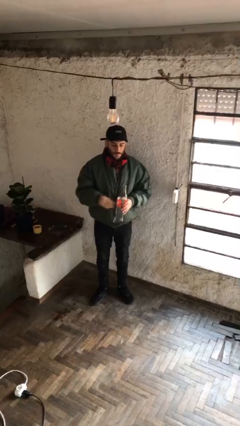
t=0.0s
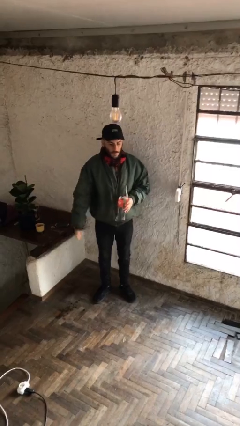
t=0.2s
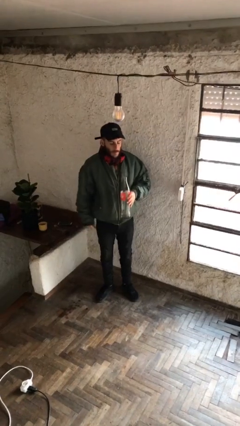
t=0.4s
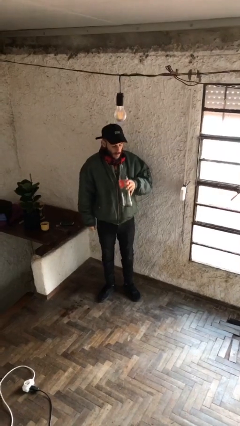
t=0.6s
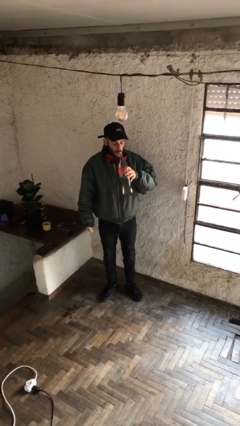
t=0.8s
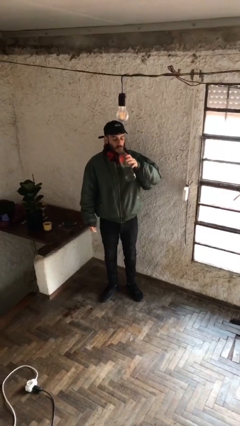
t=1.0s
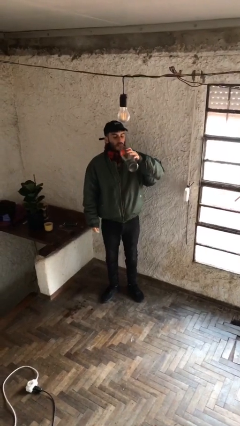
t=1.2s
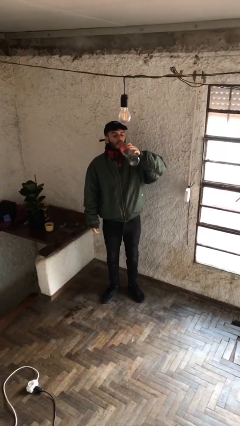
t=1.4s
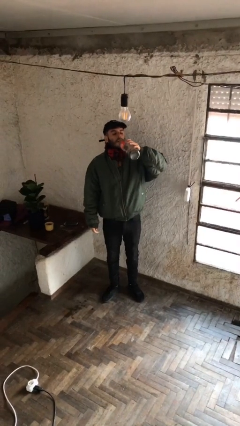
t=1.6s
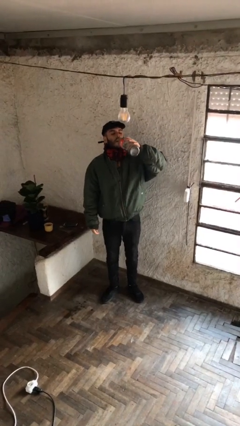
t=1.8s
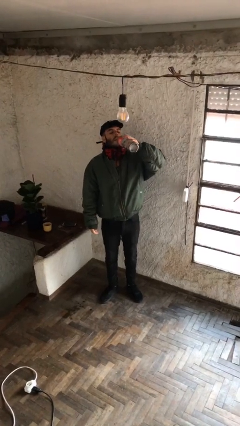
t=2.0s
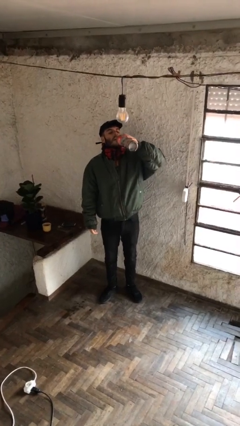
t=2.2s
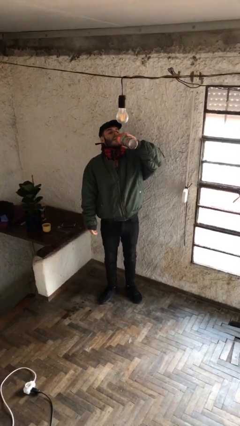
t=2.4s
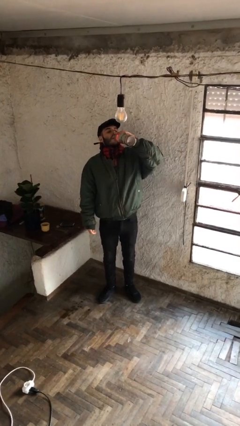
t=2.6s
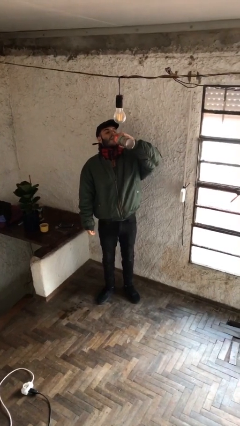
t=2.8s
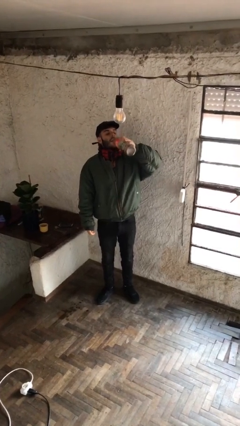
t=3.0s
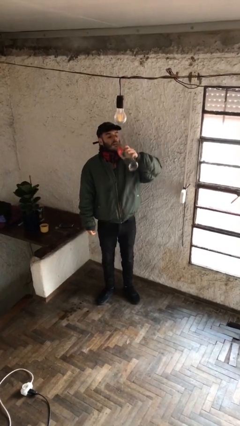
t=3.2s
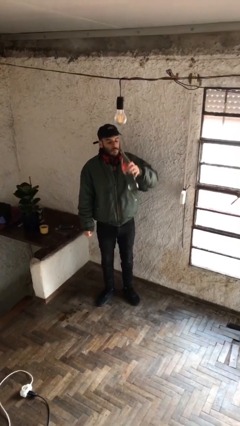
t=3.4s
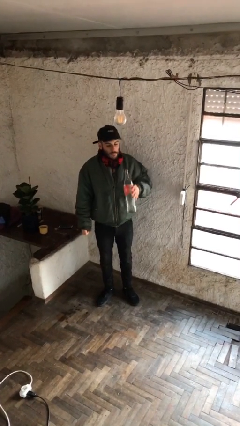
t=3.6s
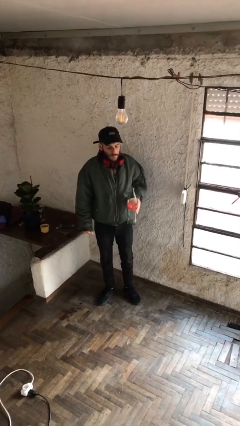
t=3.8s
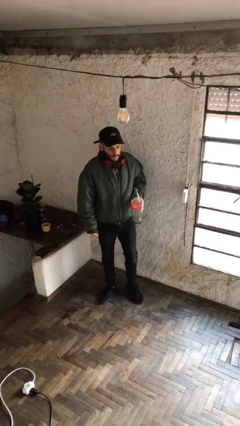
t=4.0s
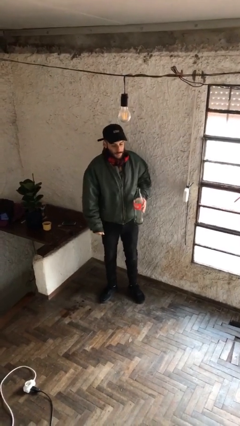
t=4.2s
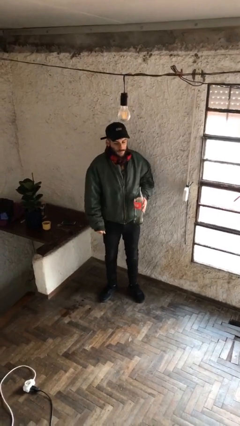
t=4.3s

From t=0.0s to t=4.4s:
person drinks from bottle

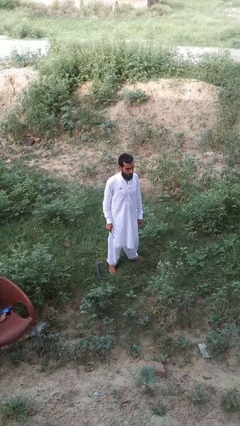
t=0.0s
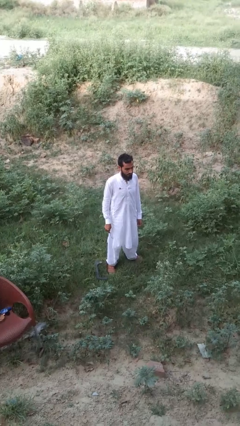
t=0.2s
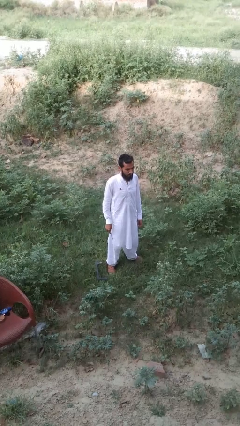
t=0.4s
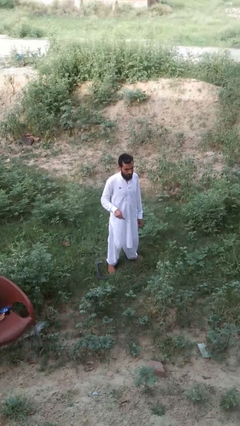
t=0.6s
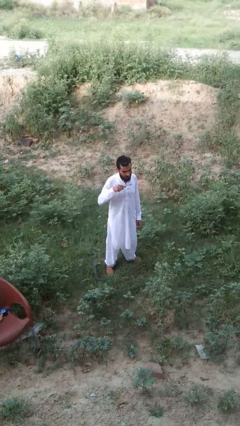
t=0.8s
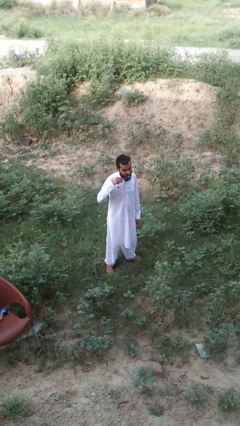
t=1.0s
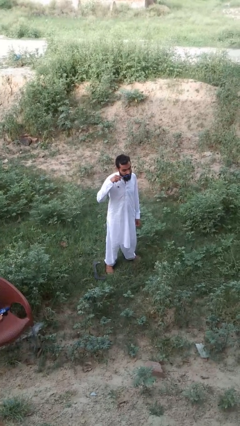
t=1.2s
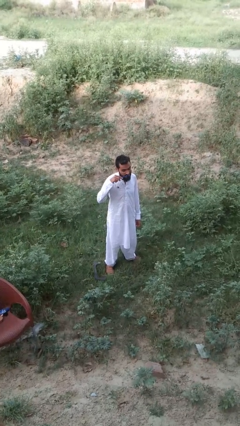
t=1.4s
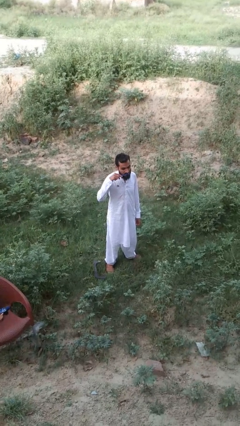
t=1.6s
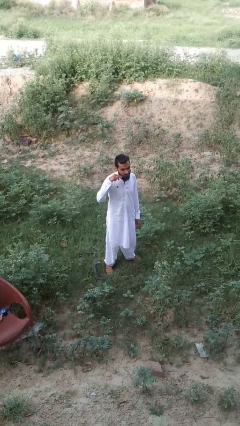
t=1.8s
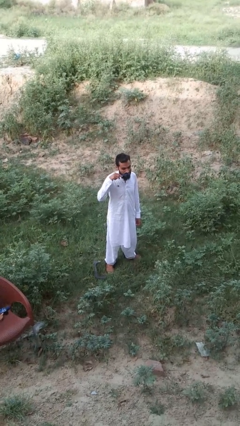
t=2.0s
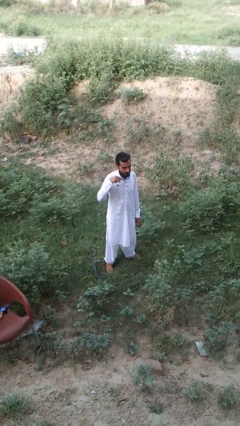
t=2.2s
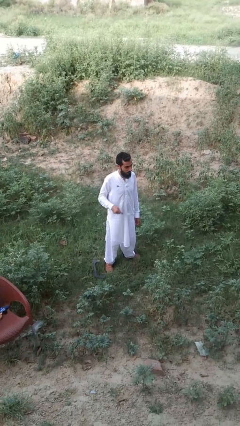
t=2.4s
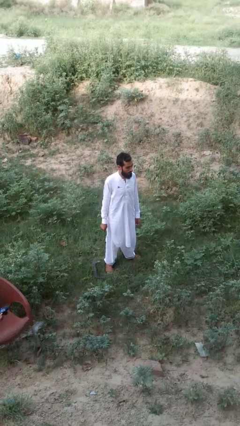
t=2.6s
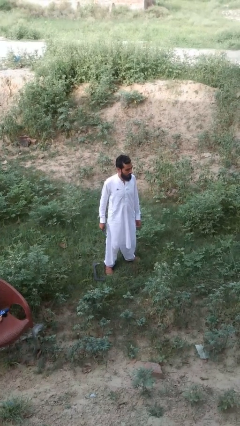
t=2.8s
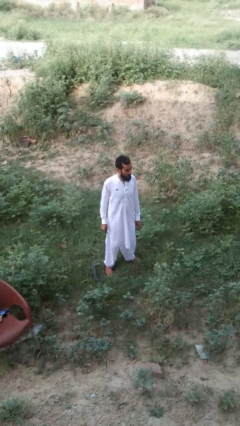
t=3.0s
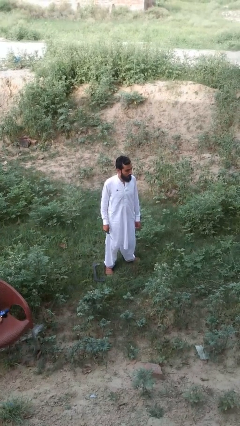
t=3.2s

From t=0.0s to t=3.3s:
person brushes teeth

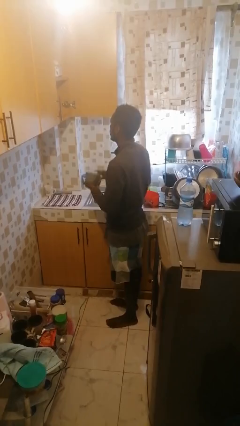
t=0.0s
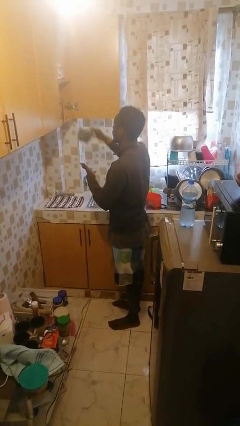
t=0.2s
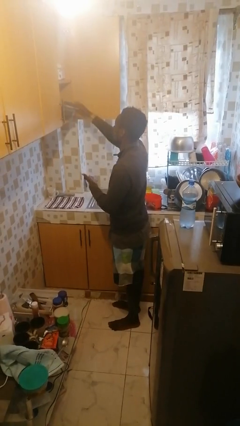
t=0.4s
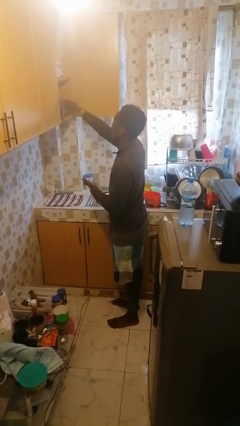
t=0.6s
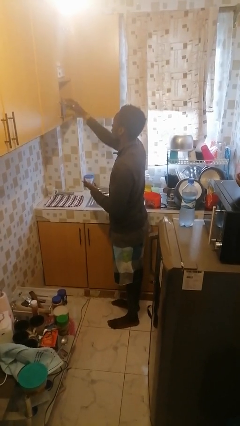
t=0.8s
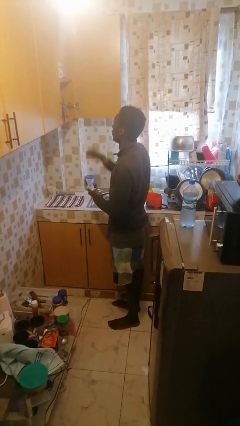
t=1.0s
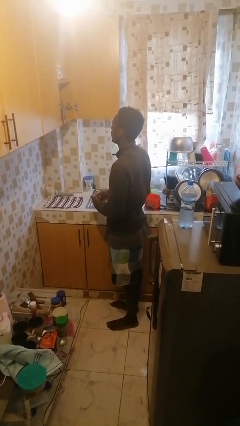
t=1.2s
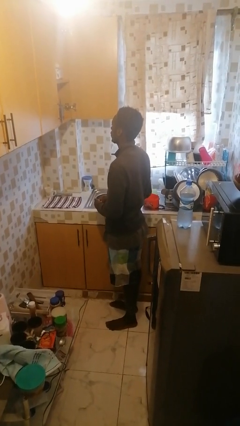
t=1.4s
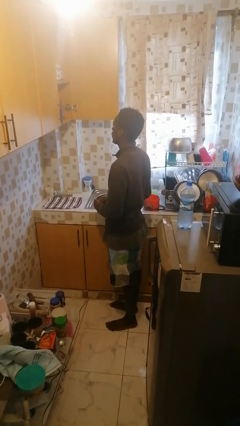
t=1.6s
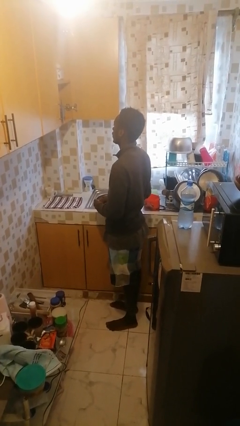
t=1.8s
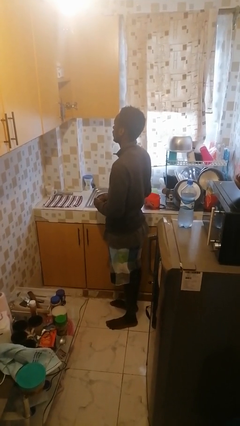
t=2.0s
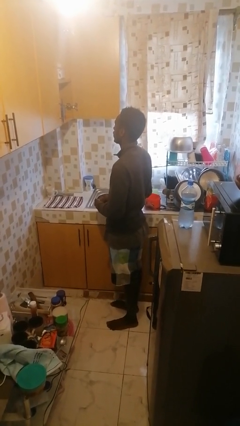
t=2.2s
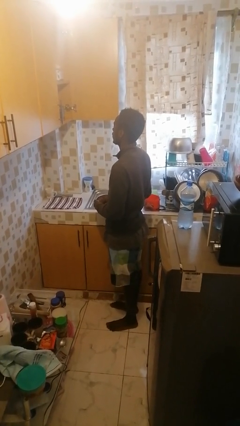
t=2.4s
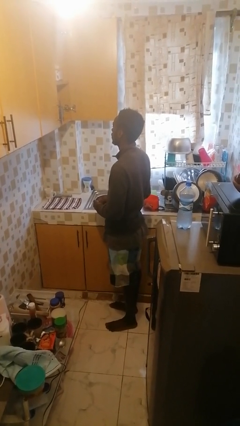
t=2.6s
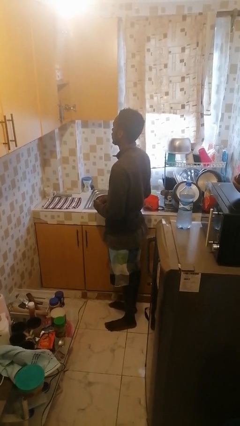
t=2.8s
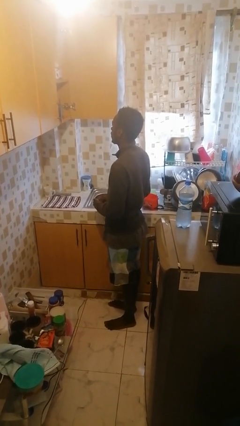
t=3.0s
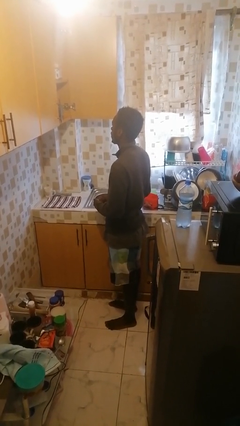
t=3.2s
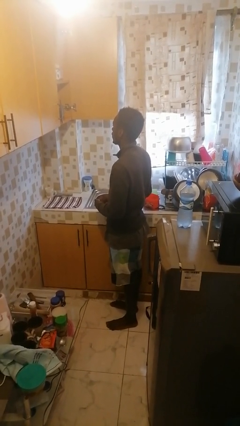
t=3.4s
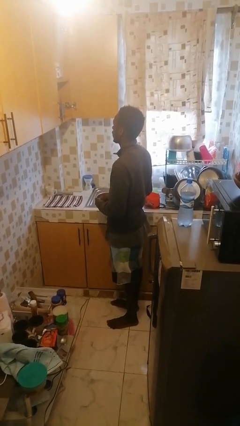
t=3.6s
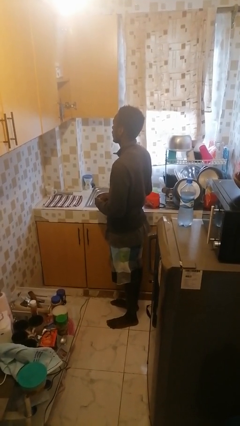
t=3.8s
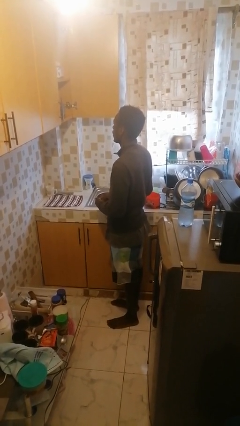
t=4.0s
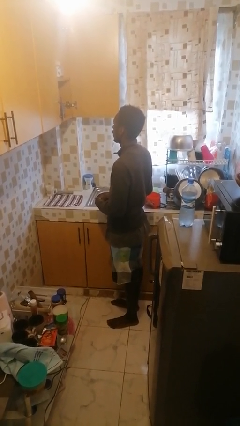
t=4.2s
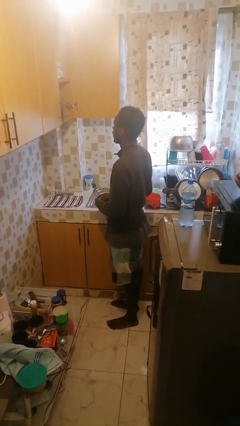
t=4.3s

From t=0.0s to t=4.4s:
person puts down object into cabinet

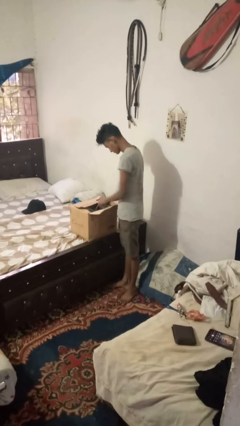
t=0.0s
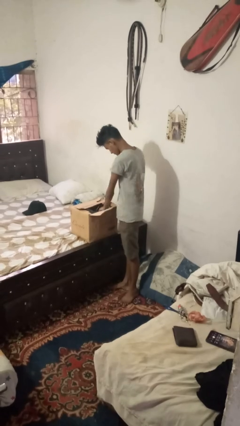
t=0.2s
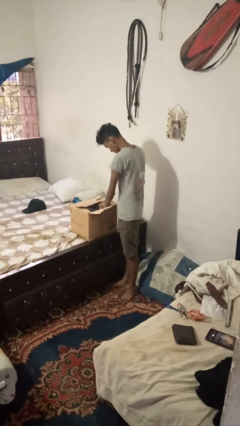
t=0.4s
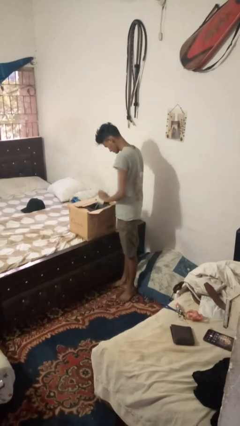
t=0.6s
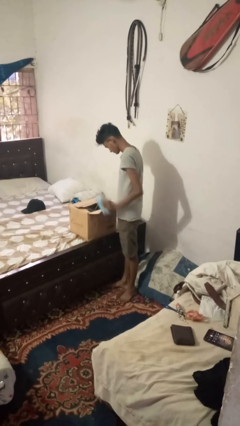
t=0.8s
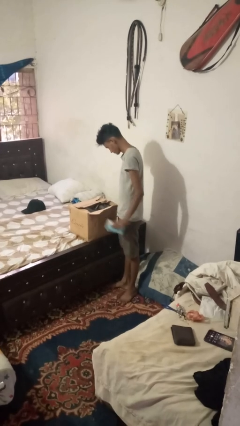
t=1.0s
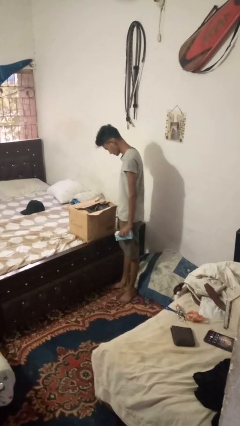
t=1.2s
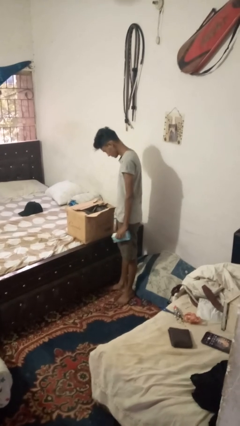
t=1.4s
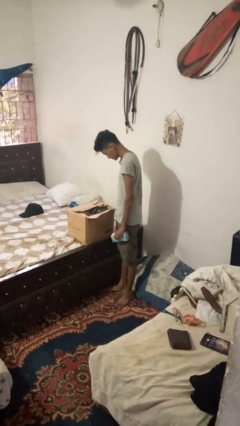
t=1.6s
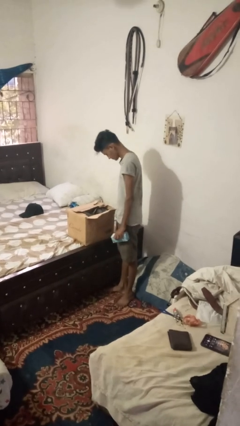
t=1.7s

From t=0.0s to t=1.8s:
person takes object from box

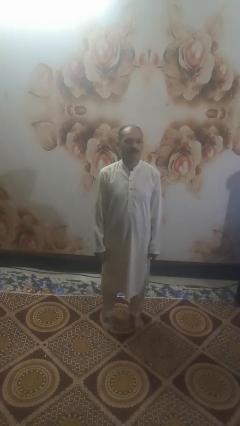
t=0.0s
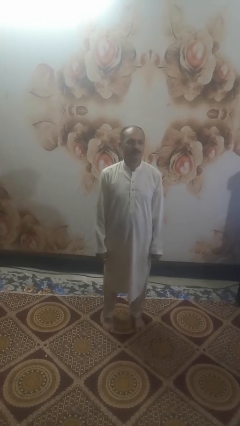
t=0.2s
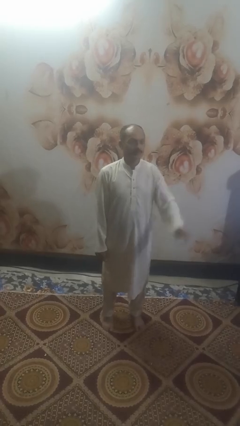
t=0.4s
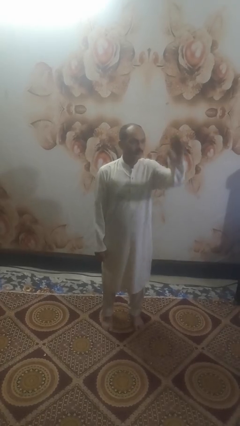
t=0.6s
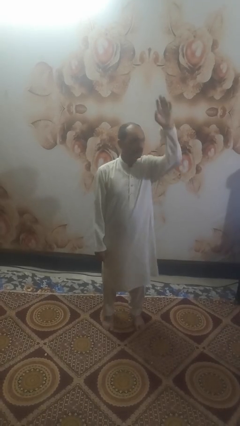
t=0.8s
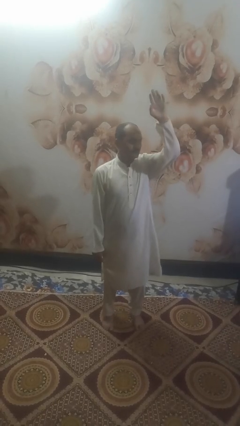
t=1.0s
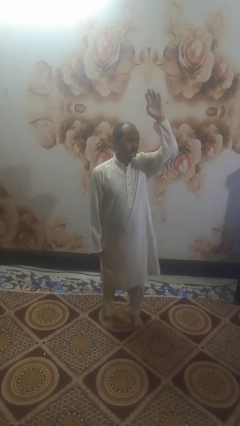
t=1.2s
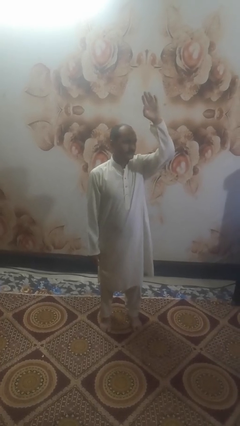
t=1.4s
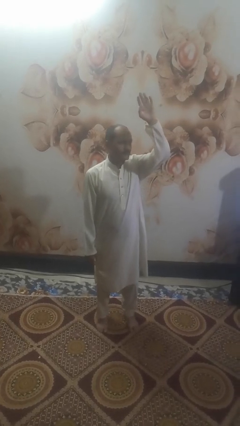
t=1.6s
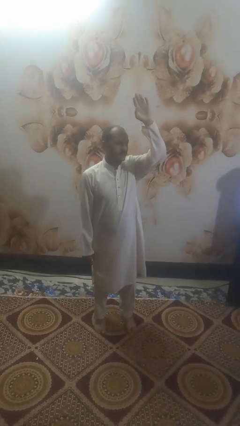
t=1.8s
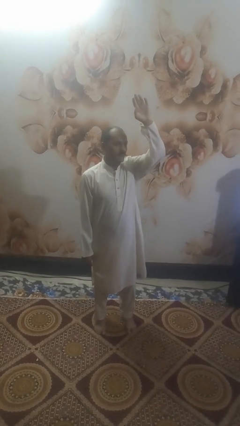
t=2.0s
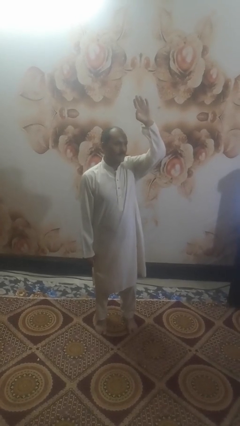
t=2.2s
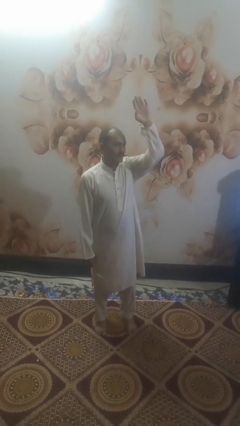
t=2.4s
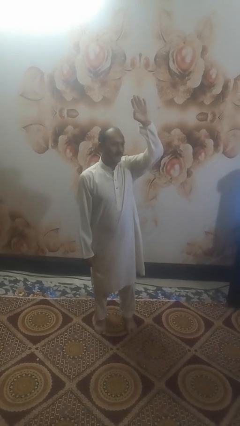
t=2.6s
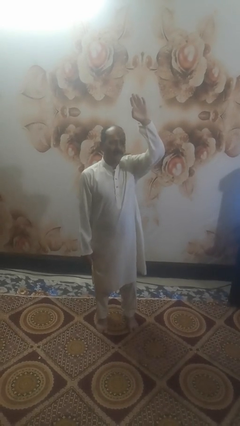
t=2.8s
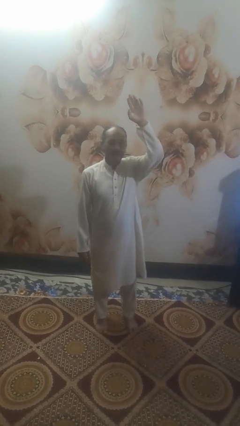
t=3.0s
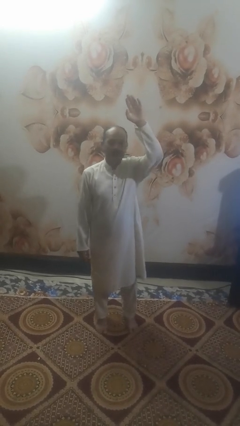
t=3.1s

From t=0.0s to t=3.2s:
person gestures raise hand

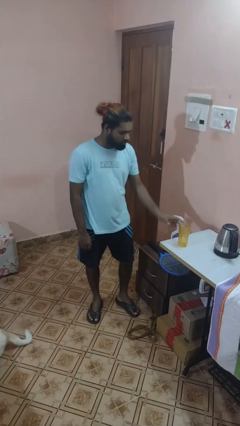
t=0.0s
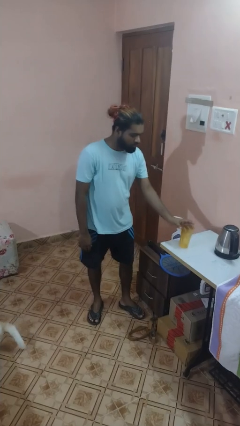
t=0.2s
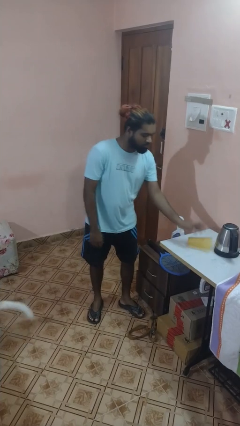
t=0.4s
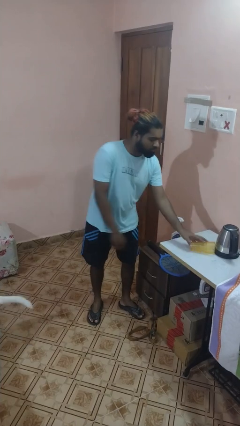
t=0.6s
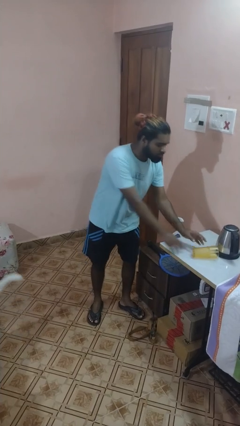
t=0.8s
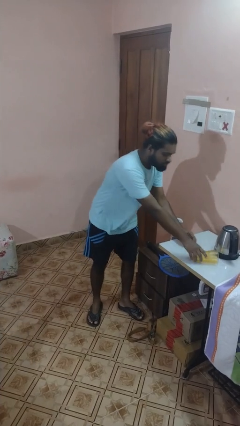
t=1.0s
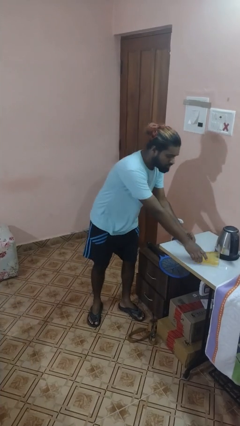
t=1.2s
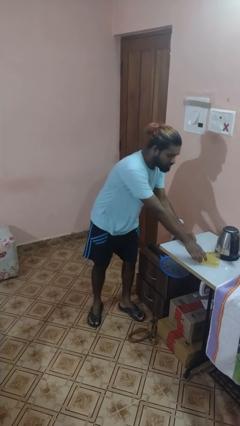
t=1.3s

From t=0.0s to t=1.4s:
person knocks over glass
